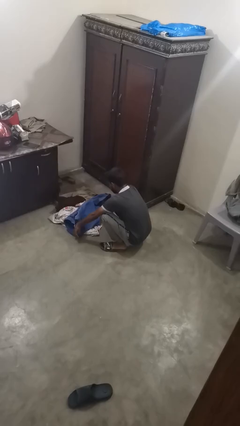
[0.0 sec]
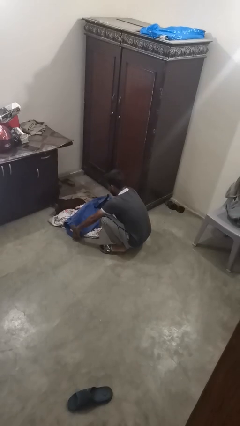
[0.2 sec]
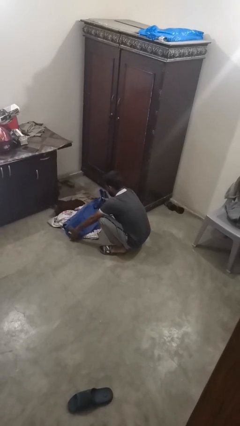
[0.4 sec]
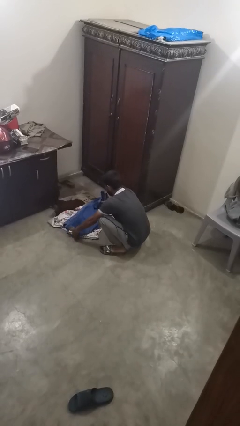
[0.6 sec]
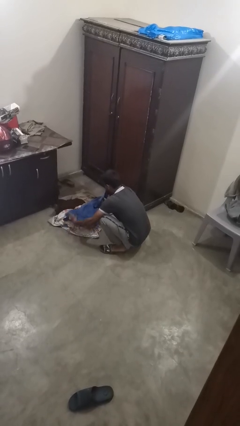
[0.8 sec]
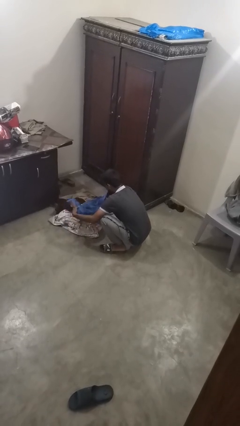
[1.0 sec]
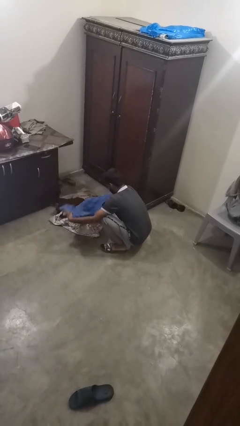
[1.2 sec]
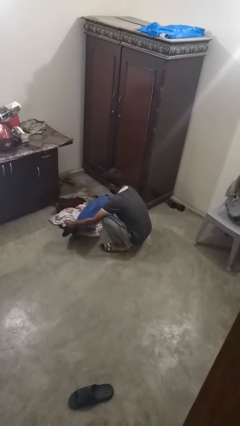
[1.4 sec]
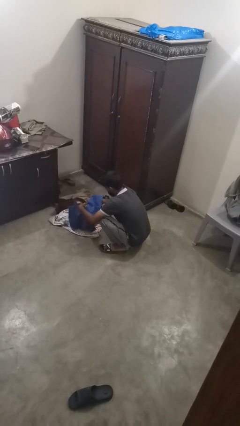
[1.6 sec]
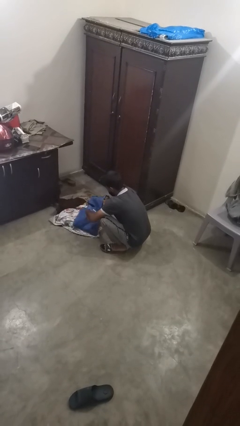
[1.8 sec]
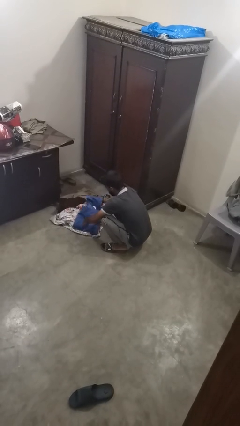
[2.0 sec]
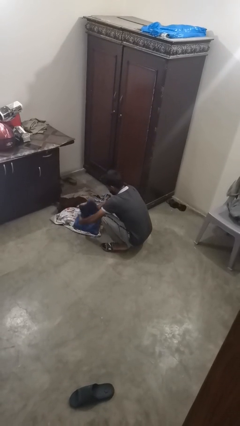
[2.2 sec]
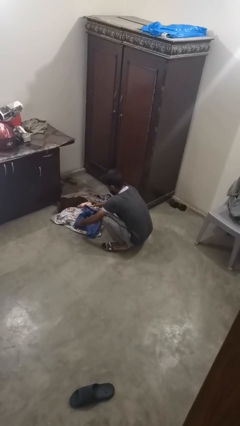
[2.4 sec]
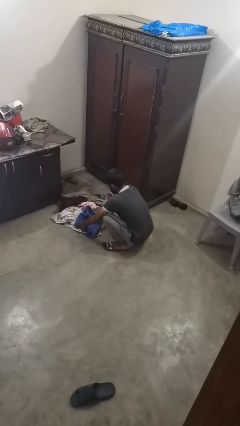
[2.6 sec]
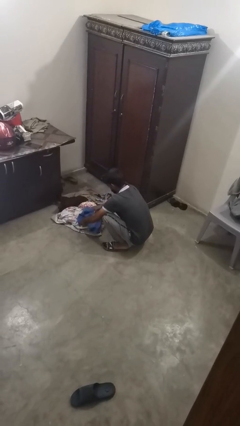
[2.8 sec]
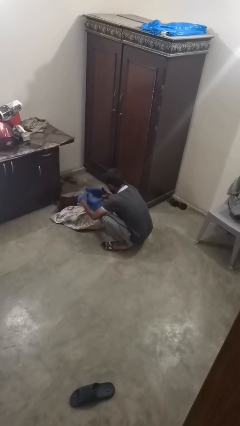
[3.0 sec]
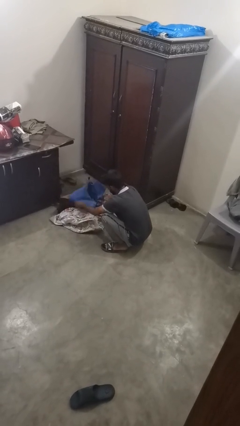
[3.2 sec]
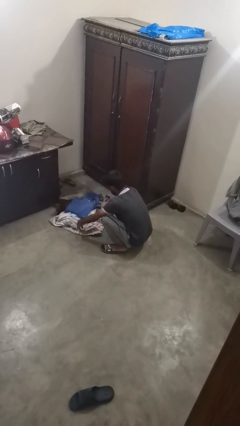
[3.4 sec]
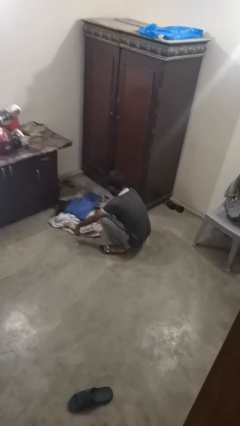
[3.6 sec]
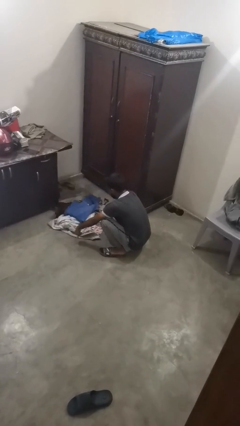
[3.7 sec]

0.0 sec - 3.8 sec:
person folds pants

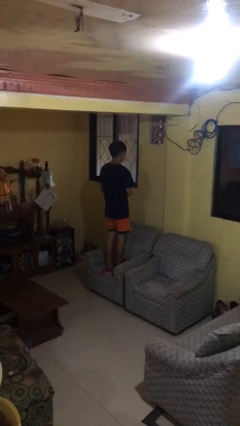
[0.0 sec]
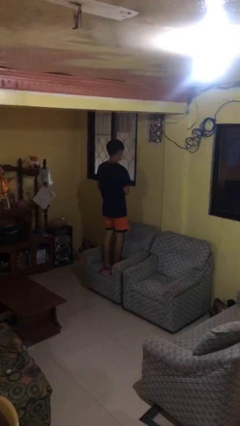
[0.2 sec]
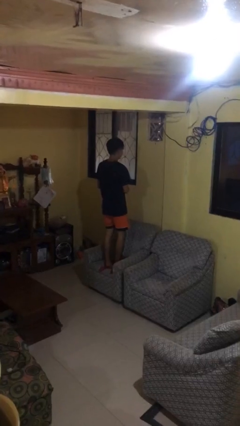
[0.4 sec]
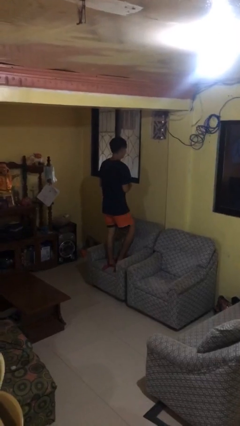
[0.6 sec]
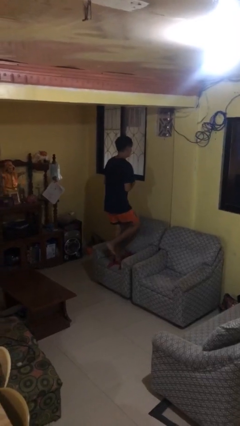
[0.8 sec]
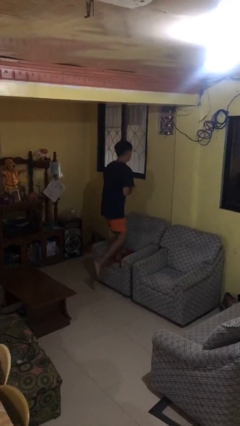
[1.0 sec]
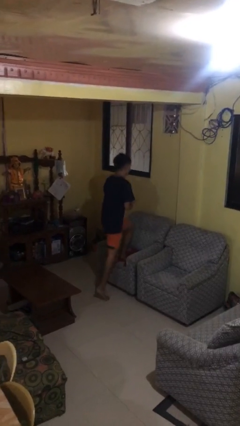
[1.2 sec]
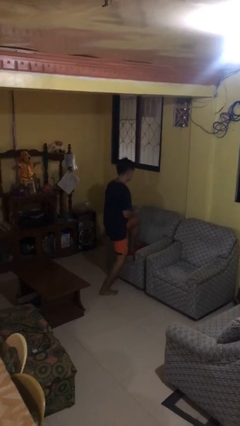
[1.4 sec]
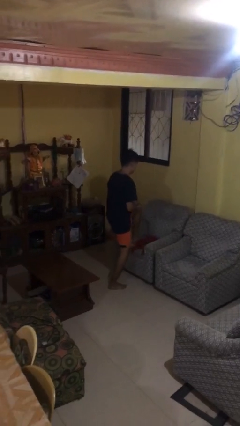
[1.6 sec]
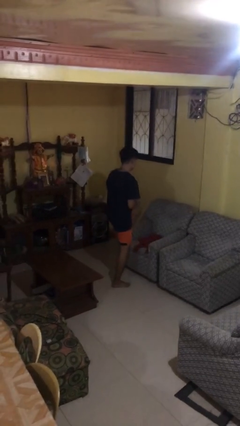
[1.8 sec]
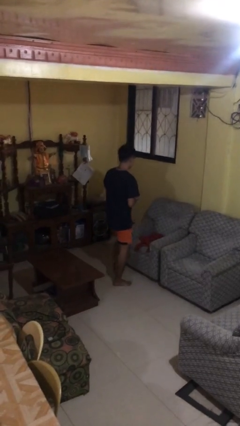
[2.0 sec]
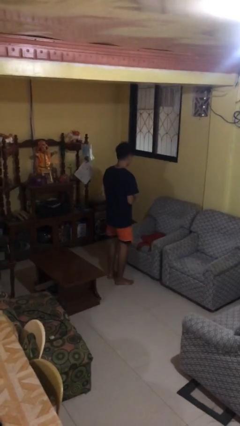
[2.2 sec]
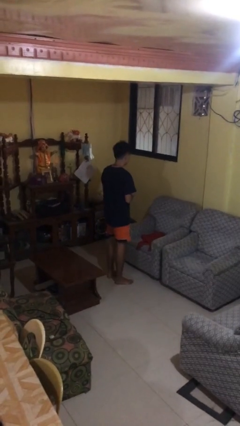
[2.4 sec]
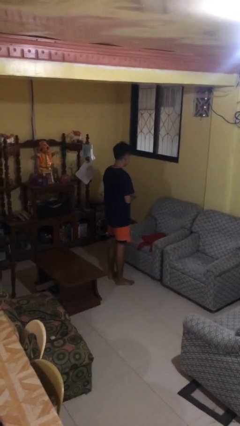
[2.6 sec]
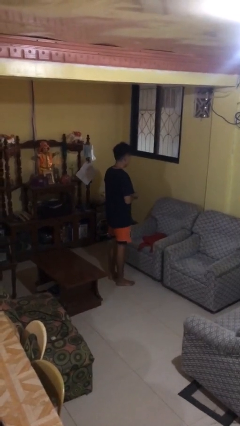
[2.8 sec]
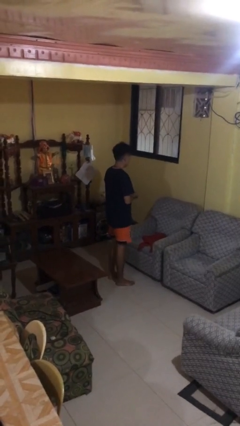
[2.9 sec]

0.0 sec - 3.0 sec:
person climbs off couch

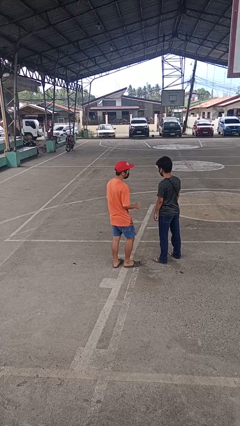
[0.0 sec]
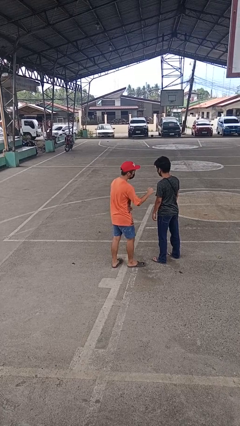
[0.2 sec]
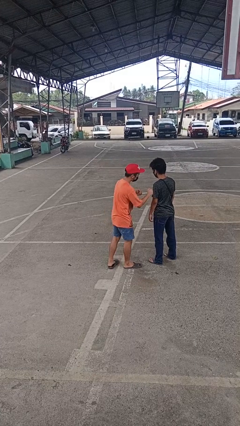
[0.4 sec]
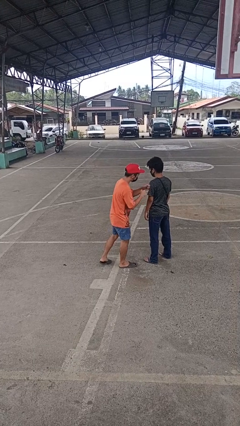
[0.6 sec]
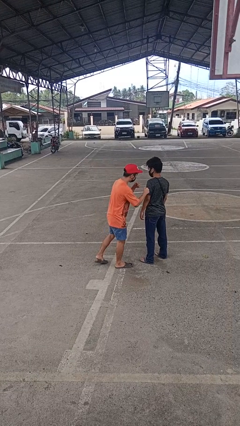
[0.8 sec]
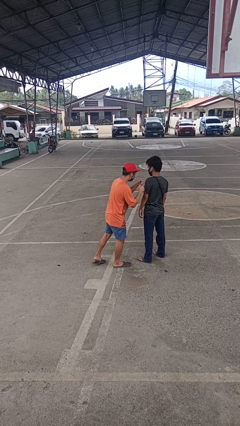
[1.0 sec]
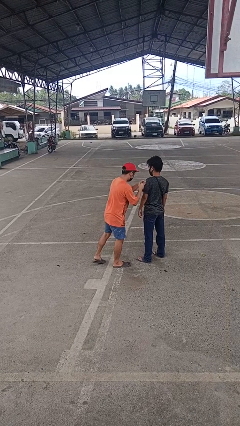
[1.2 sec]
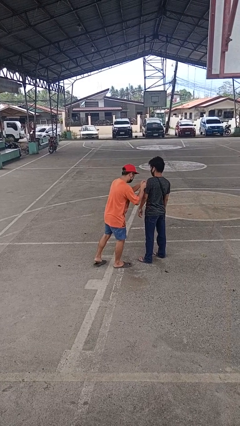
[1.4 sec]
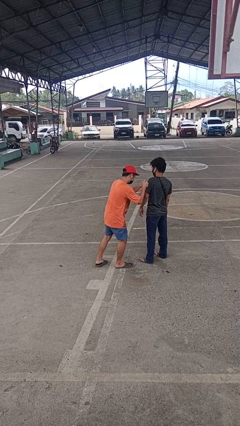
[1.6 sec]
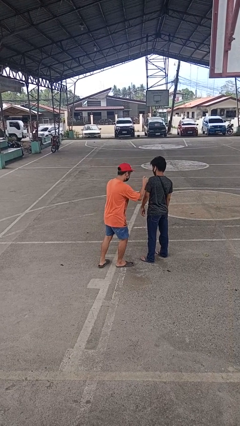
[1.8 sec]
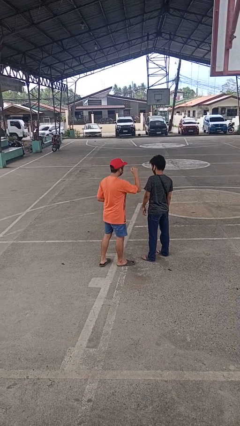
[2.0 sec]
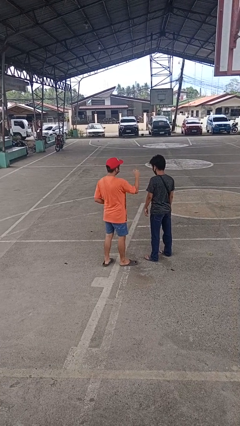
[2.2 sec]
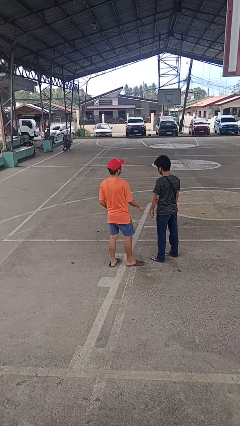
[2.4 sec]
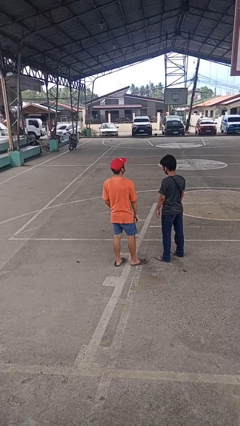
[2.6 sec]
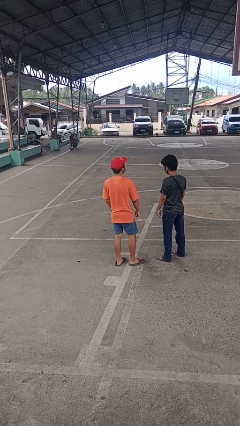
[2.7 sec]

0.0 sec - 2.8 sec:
person pounds shoulders of person

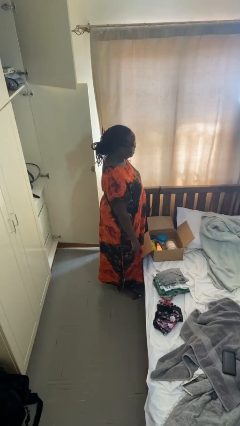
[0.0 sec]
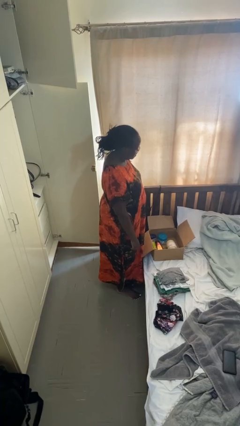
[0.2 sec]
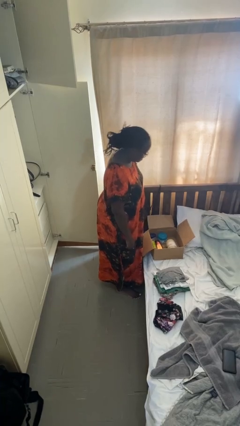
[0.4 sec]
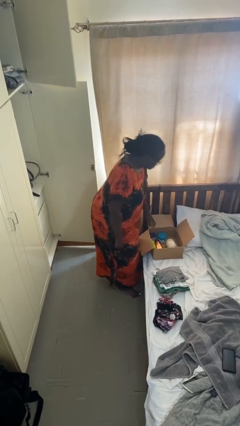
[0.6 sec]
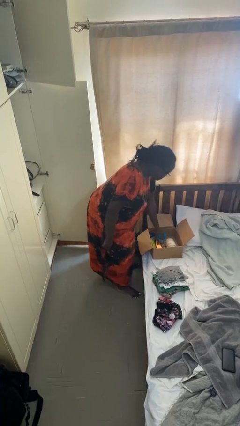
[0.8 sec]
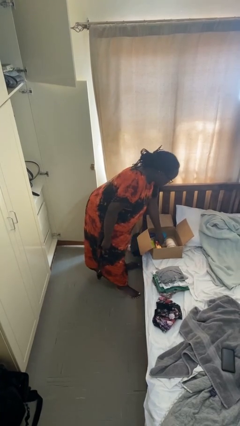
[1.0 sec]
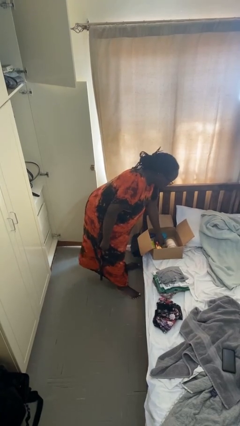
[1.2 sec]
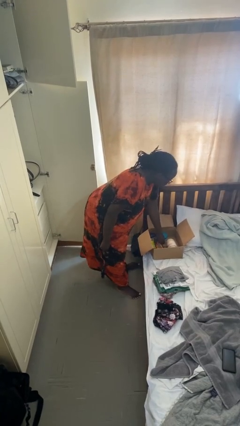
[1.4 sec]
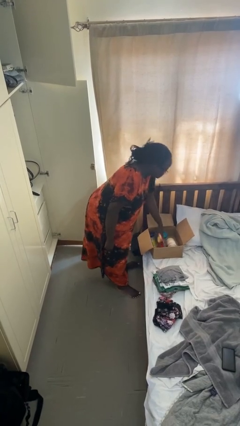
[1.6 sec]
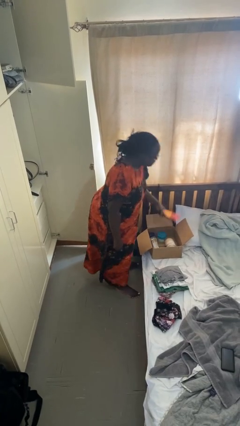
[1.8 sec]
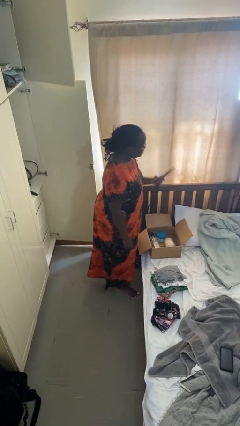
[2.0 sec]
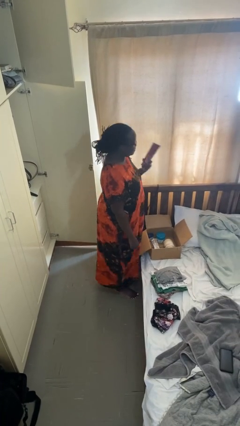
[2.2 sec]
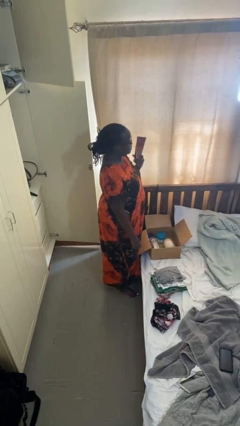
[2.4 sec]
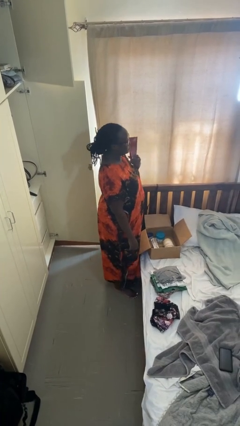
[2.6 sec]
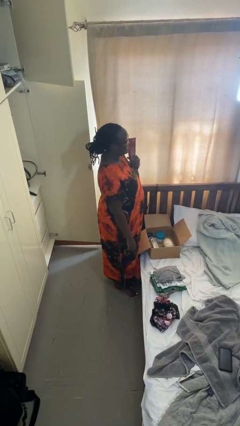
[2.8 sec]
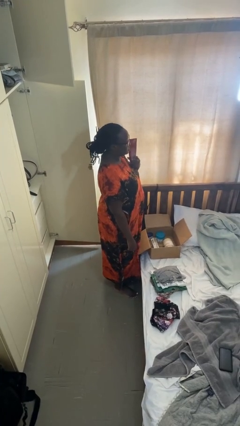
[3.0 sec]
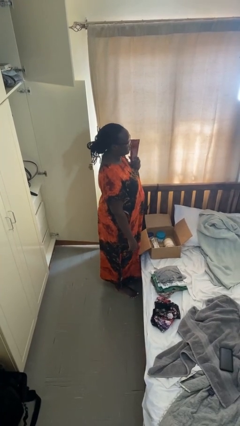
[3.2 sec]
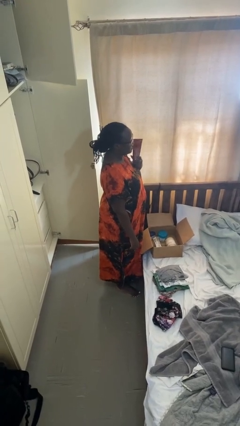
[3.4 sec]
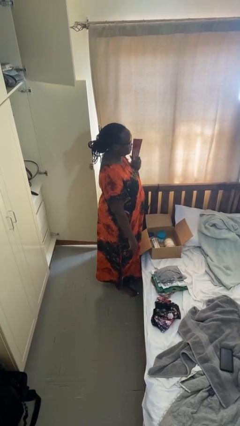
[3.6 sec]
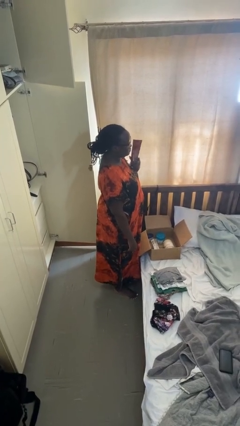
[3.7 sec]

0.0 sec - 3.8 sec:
person takes object from box

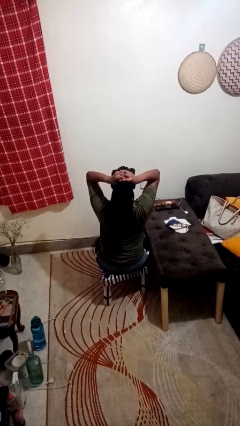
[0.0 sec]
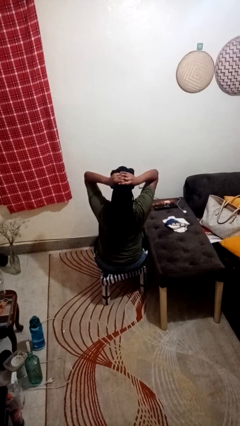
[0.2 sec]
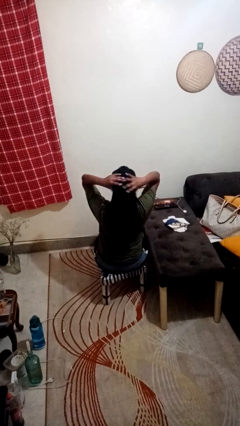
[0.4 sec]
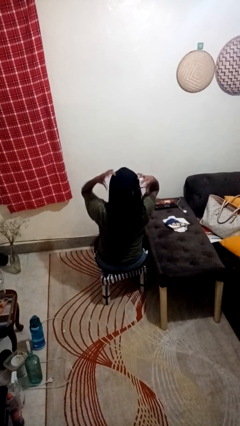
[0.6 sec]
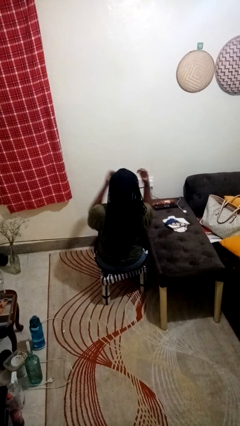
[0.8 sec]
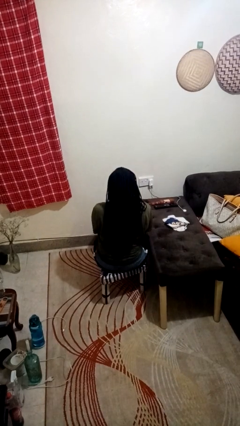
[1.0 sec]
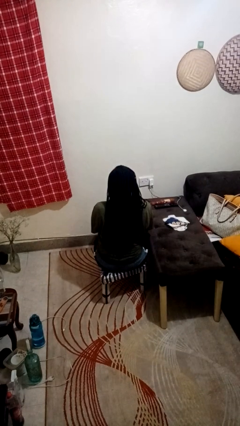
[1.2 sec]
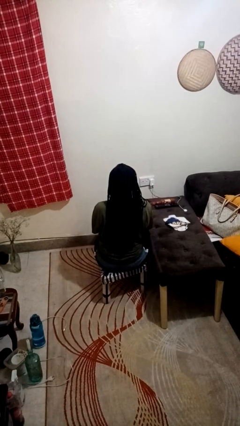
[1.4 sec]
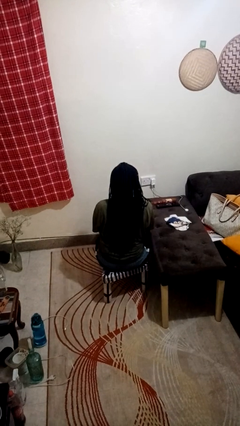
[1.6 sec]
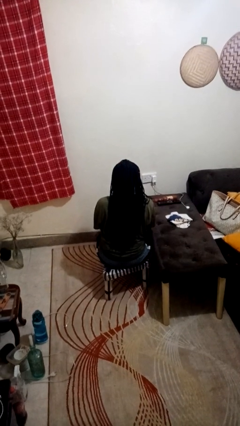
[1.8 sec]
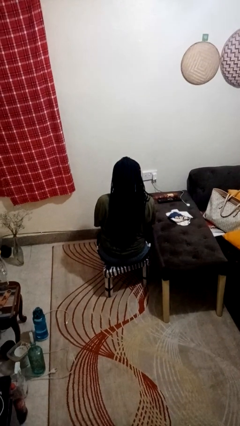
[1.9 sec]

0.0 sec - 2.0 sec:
person takes off hairtie

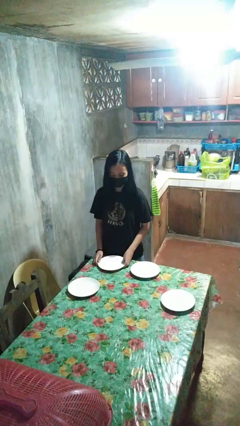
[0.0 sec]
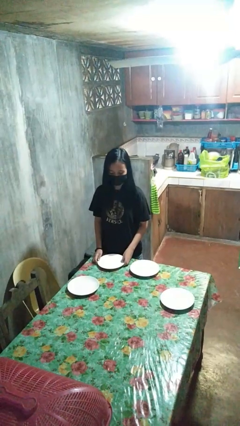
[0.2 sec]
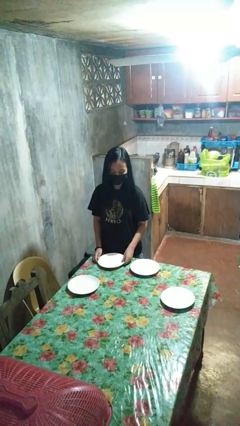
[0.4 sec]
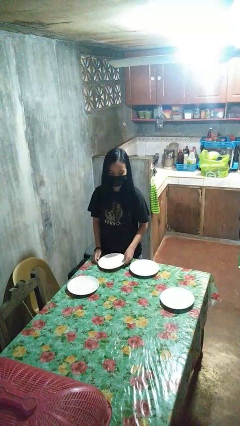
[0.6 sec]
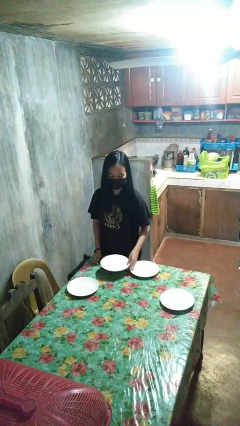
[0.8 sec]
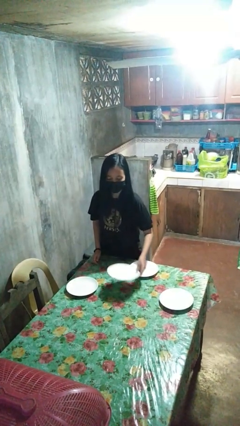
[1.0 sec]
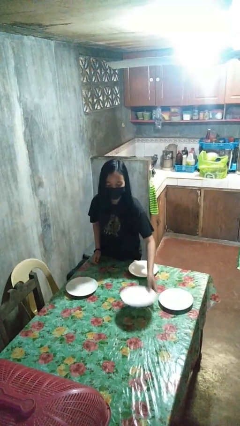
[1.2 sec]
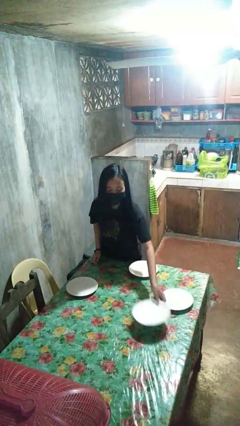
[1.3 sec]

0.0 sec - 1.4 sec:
person sets table

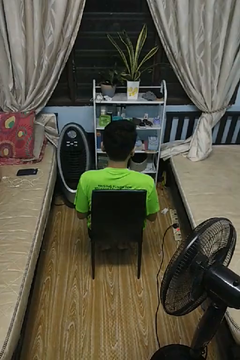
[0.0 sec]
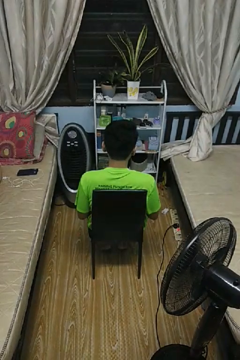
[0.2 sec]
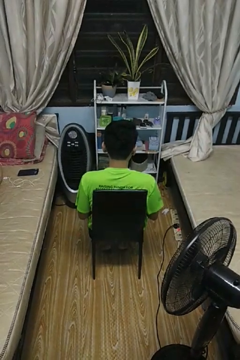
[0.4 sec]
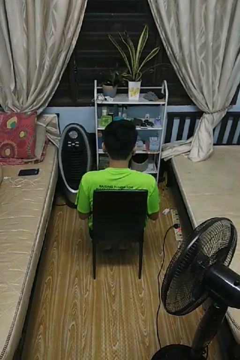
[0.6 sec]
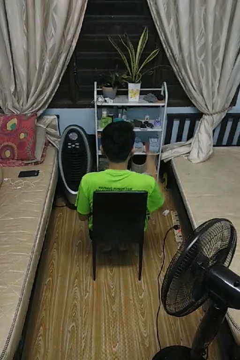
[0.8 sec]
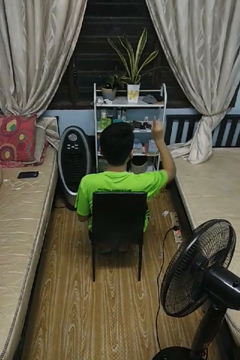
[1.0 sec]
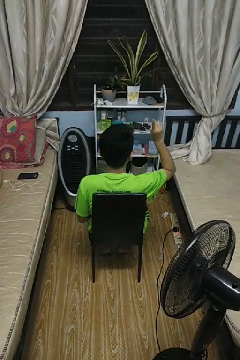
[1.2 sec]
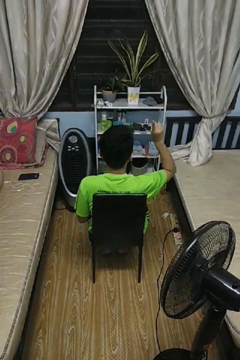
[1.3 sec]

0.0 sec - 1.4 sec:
person gestures number one
